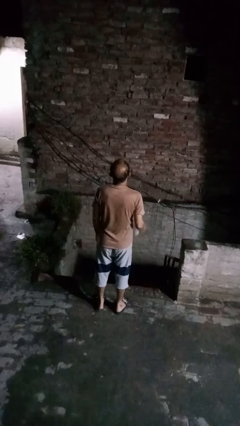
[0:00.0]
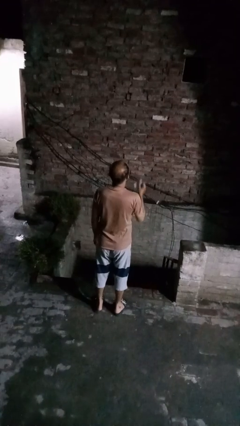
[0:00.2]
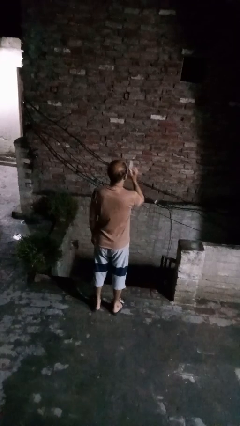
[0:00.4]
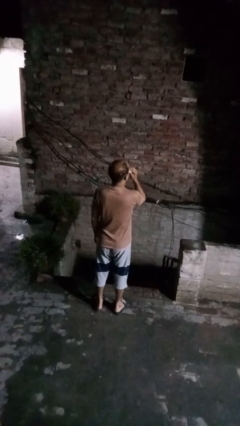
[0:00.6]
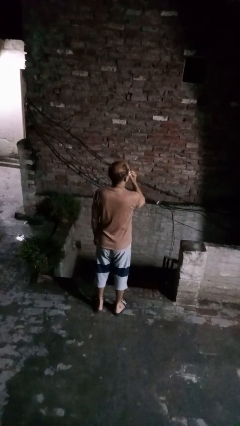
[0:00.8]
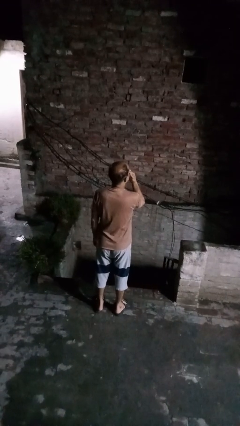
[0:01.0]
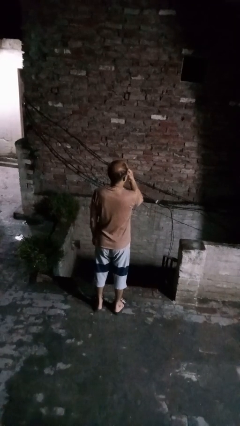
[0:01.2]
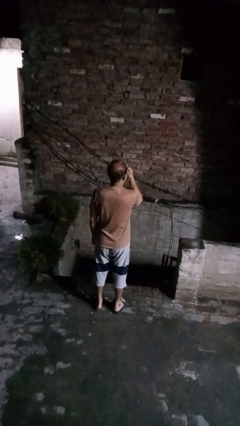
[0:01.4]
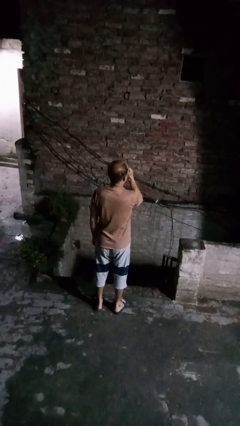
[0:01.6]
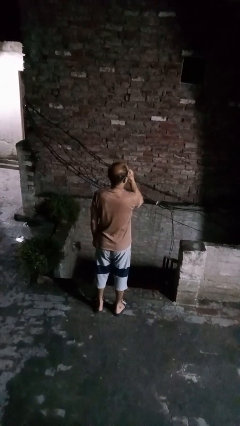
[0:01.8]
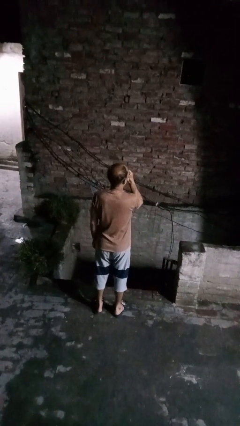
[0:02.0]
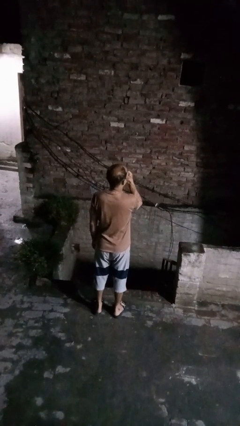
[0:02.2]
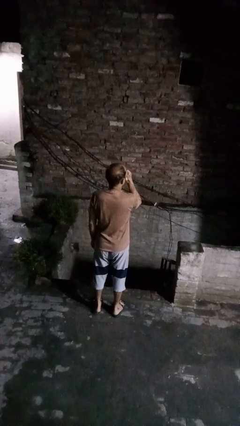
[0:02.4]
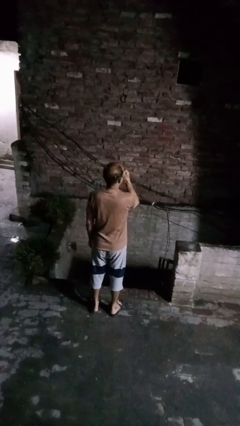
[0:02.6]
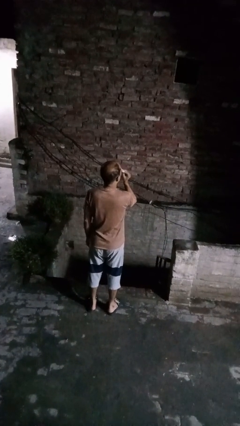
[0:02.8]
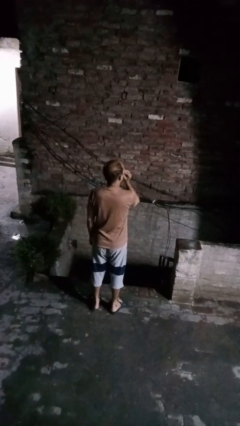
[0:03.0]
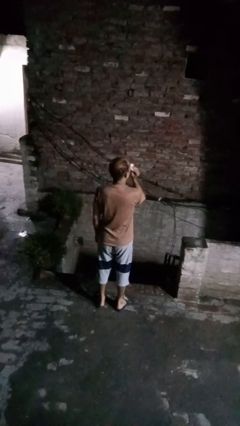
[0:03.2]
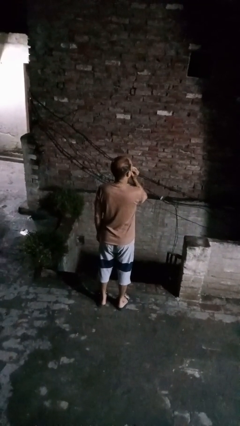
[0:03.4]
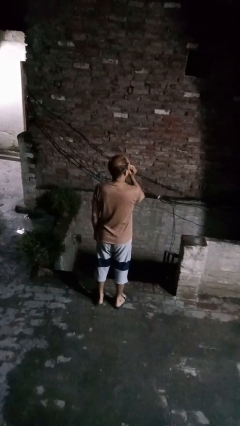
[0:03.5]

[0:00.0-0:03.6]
person blows nose

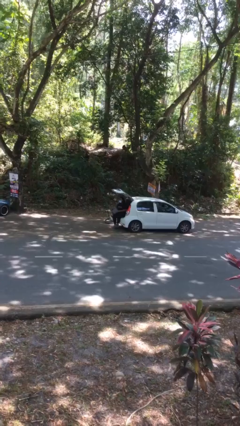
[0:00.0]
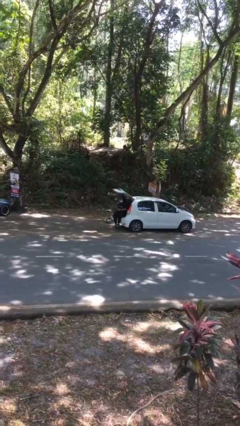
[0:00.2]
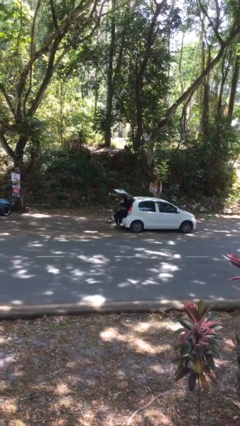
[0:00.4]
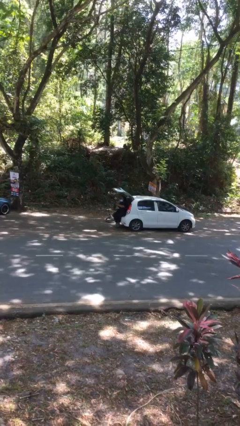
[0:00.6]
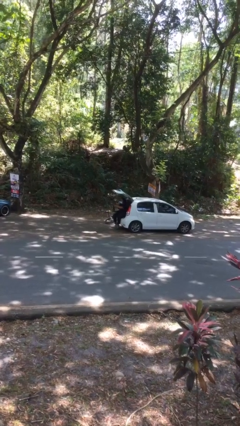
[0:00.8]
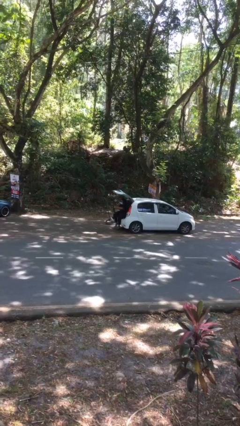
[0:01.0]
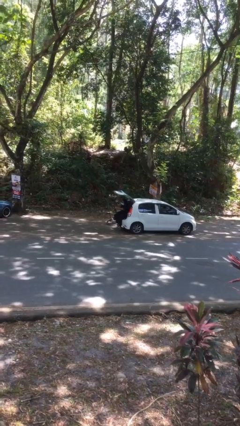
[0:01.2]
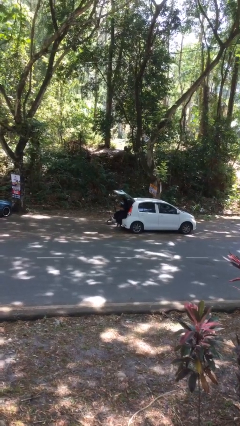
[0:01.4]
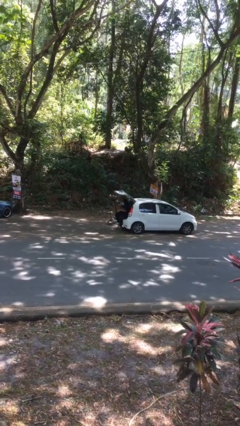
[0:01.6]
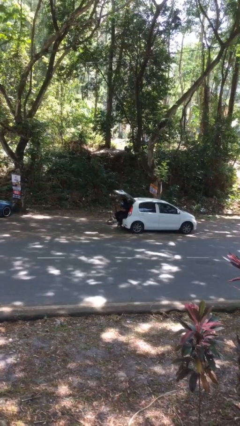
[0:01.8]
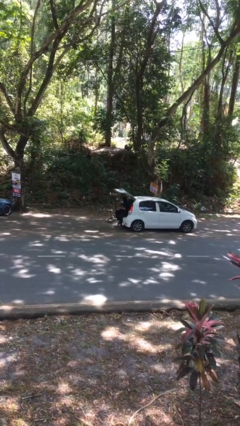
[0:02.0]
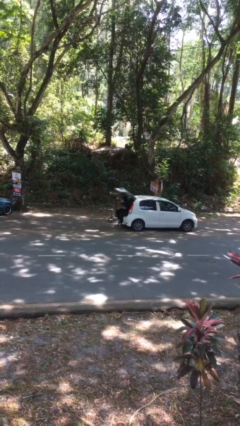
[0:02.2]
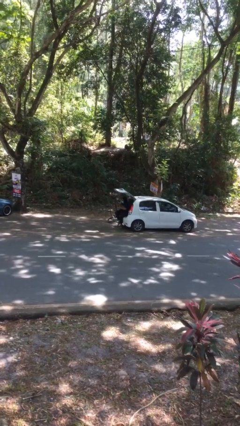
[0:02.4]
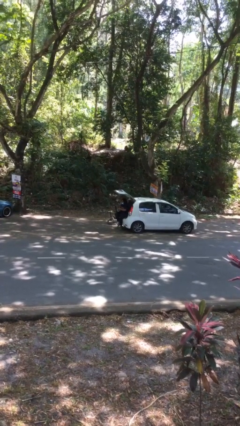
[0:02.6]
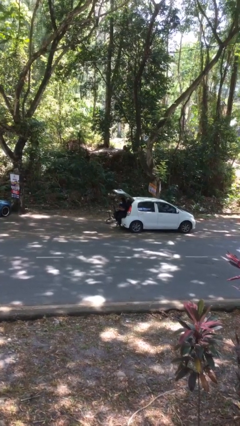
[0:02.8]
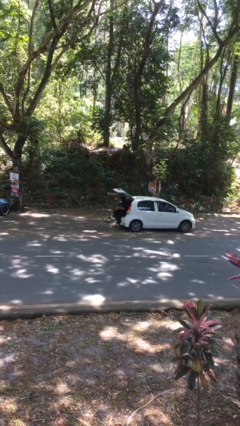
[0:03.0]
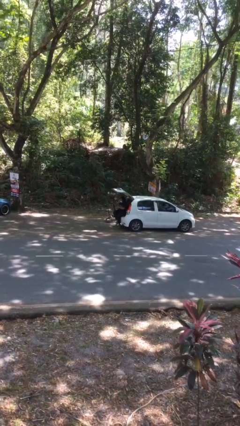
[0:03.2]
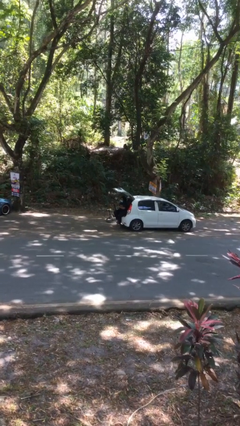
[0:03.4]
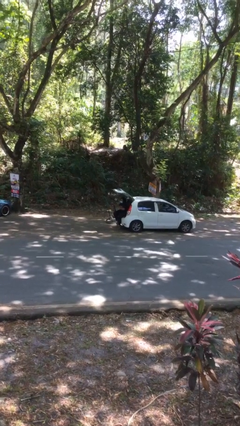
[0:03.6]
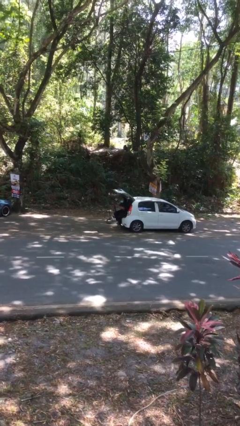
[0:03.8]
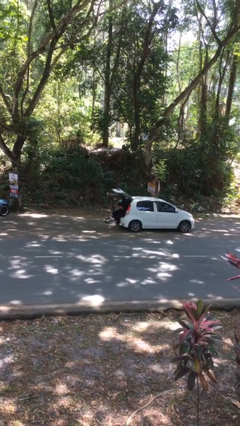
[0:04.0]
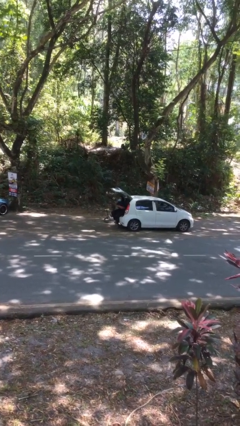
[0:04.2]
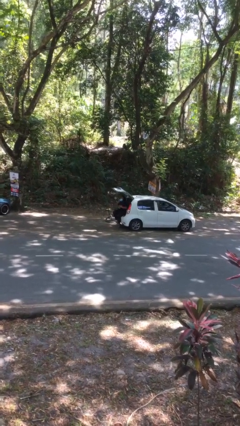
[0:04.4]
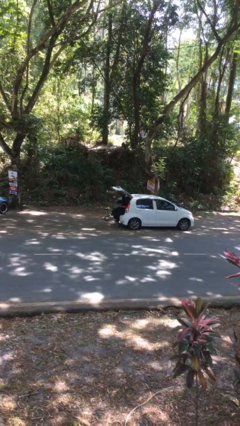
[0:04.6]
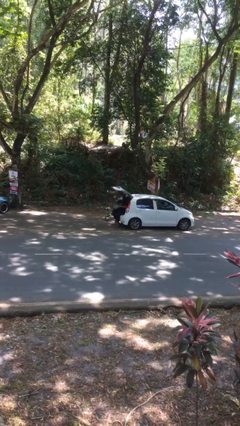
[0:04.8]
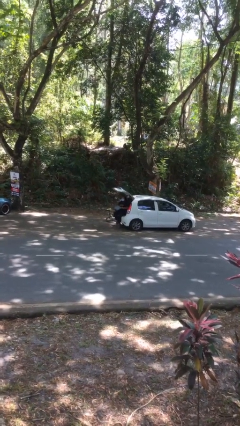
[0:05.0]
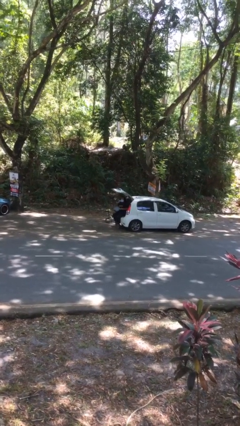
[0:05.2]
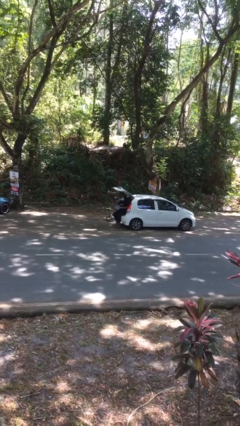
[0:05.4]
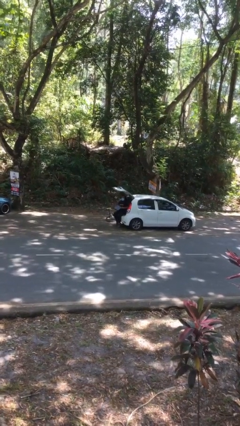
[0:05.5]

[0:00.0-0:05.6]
person interacts with laptop

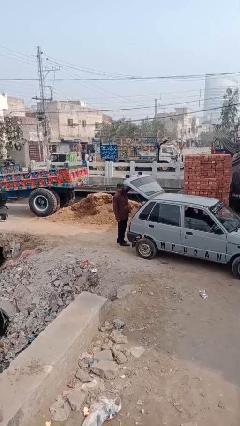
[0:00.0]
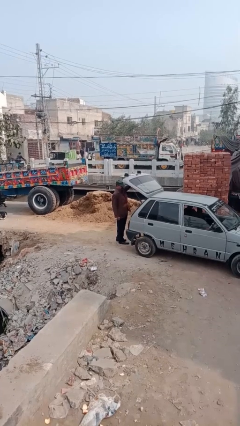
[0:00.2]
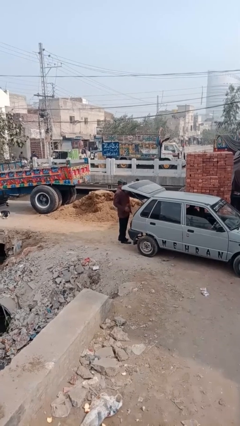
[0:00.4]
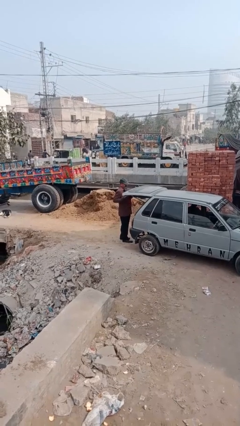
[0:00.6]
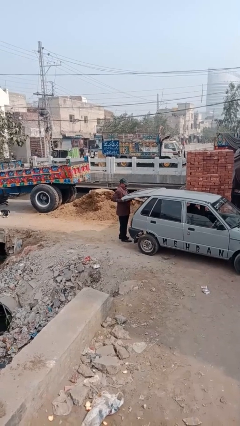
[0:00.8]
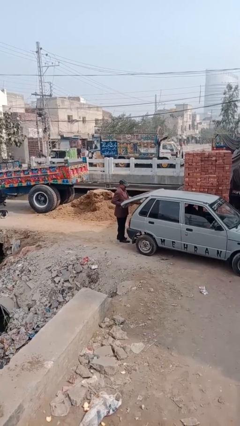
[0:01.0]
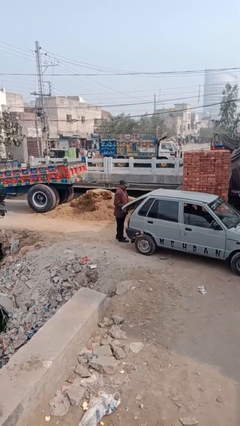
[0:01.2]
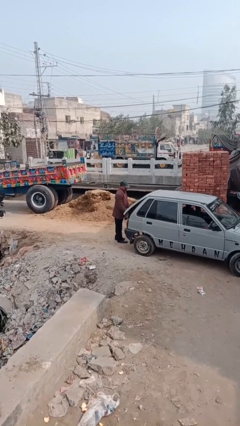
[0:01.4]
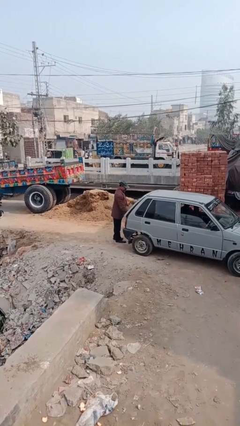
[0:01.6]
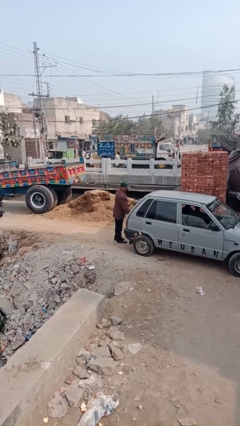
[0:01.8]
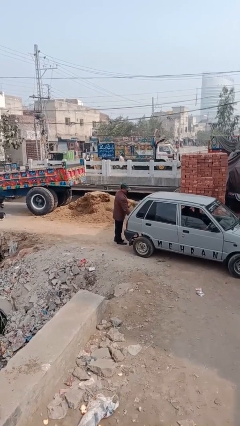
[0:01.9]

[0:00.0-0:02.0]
person closes car trunk

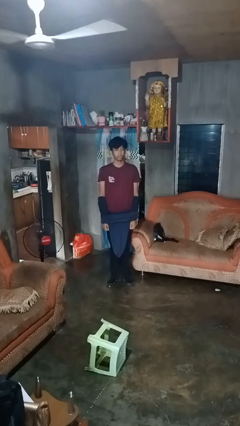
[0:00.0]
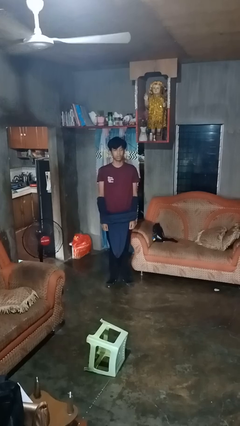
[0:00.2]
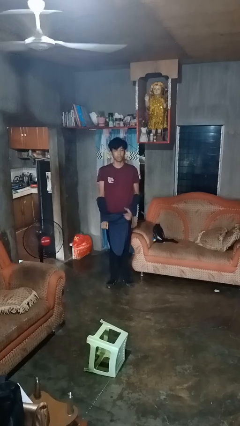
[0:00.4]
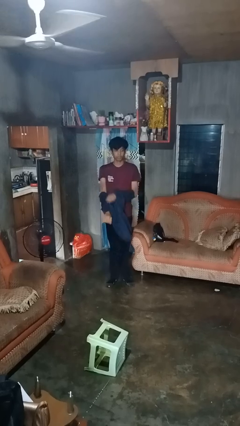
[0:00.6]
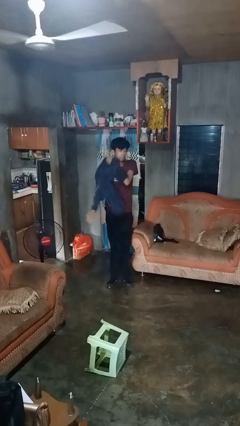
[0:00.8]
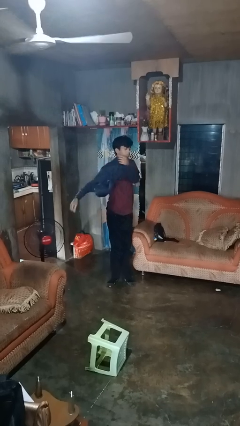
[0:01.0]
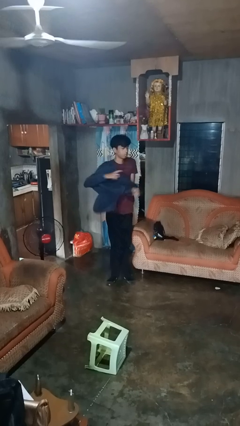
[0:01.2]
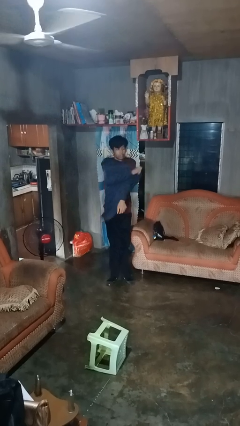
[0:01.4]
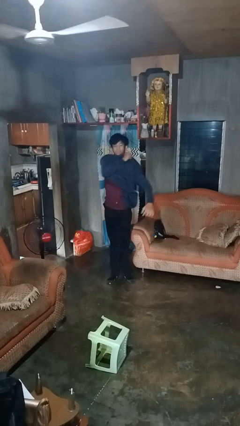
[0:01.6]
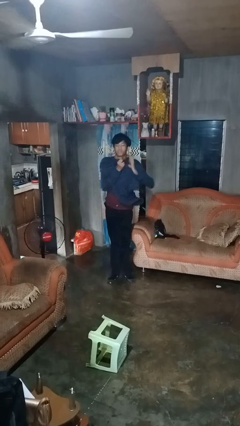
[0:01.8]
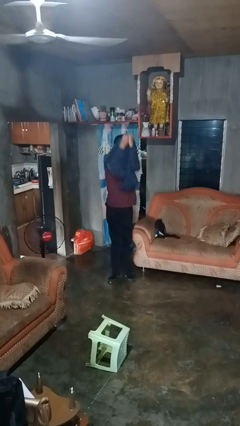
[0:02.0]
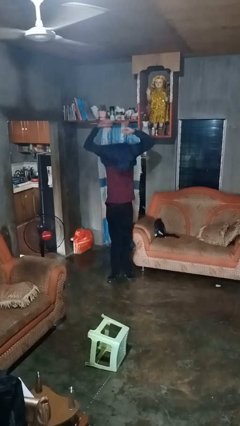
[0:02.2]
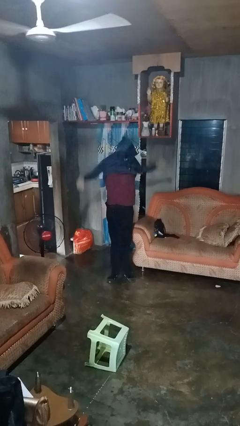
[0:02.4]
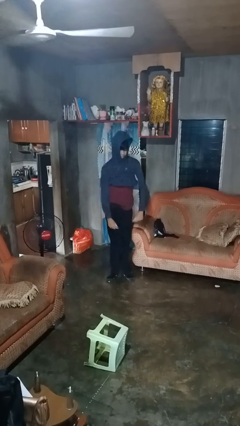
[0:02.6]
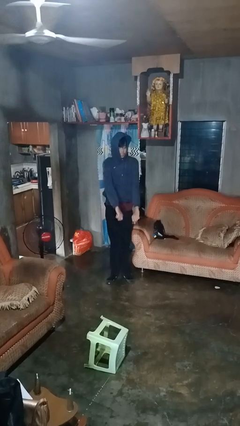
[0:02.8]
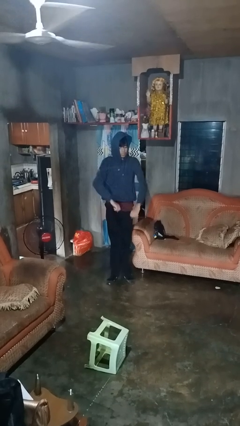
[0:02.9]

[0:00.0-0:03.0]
person puts on hoodie

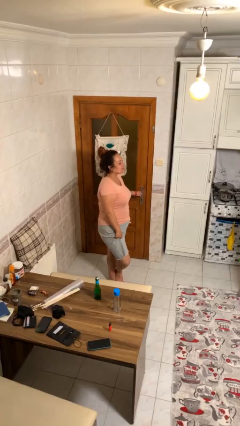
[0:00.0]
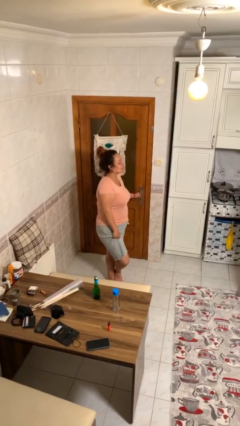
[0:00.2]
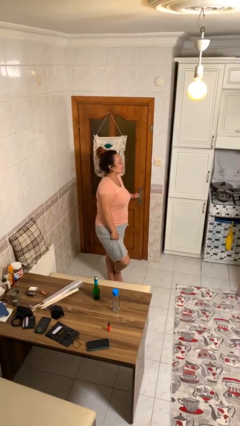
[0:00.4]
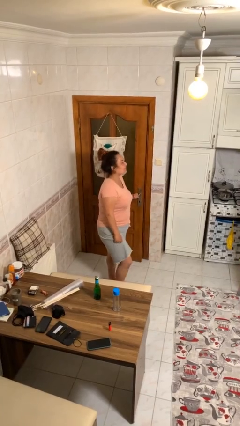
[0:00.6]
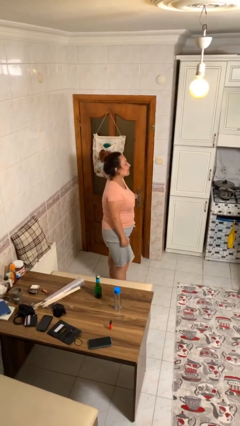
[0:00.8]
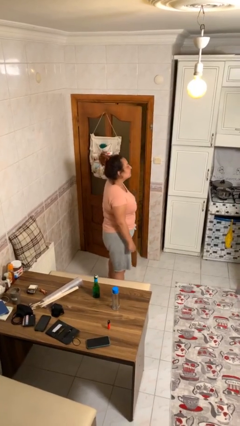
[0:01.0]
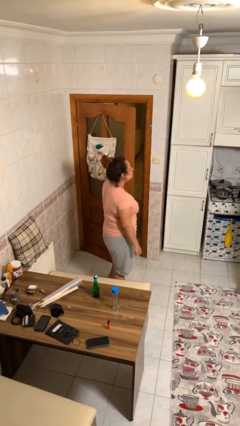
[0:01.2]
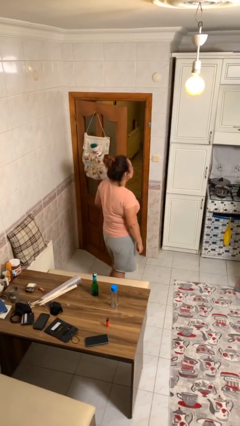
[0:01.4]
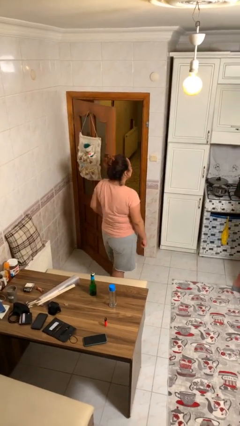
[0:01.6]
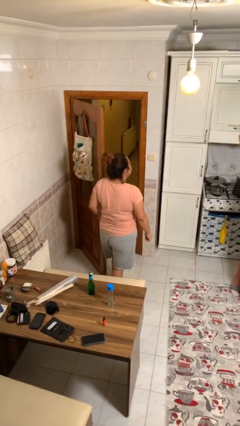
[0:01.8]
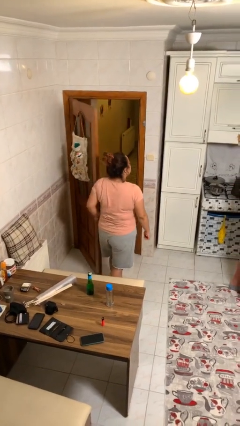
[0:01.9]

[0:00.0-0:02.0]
person opens facility door

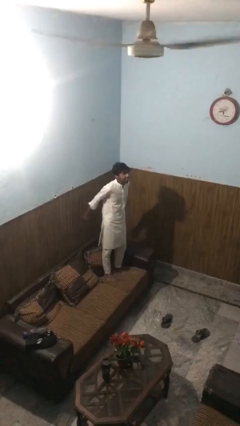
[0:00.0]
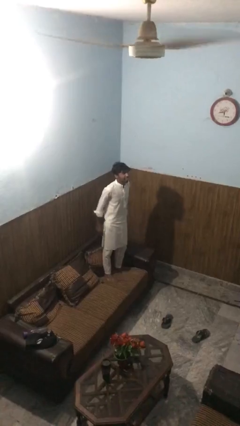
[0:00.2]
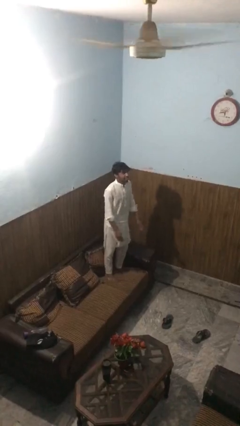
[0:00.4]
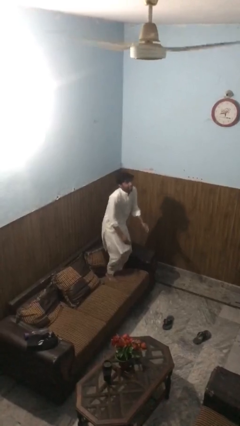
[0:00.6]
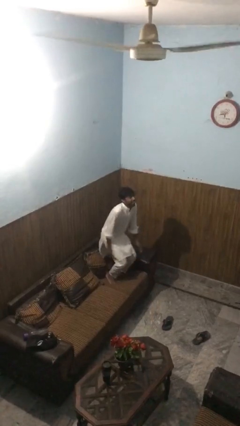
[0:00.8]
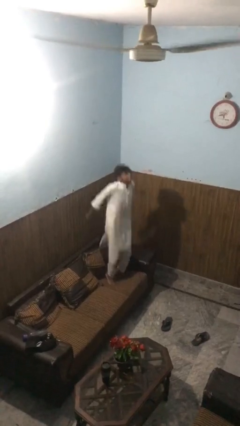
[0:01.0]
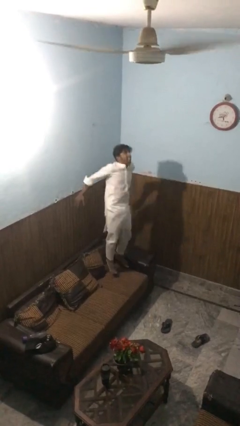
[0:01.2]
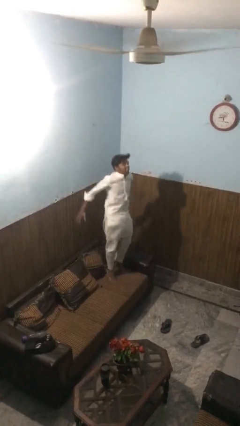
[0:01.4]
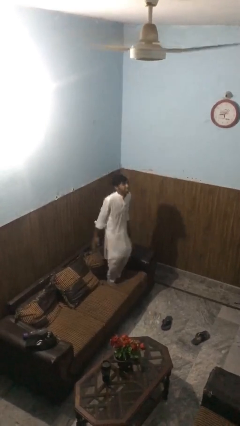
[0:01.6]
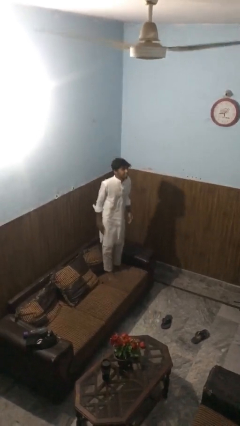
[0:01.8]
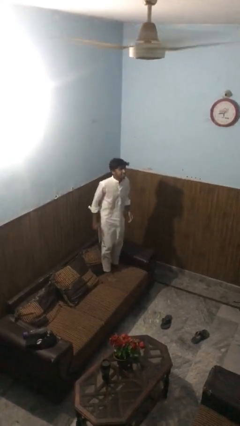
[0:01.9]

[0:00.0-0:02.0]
person jumps on couch
